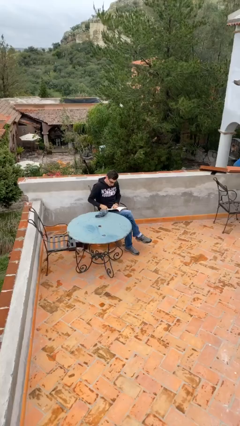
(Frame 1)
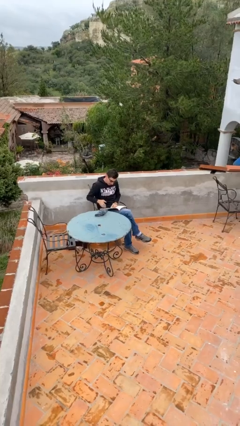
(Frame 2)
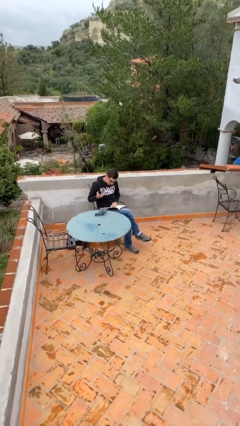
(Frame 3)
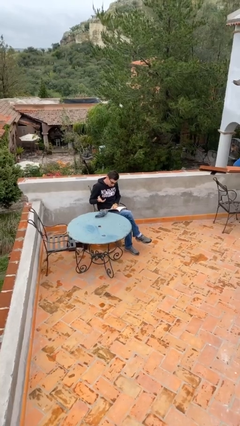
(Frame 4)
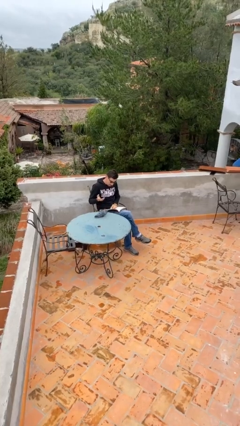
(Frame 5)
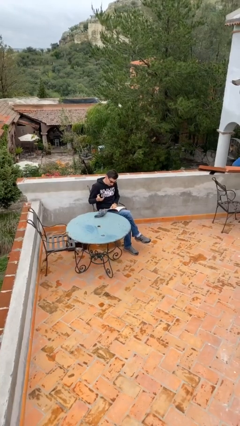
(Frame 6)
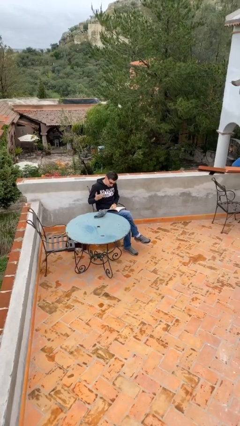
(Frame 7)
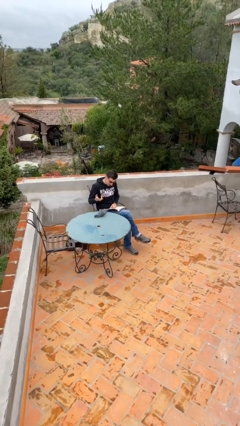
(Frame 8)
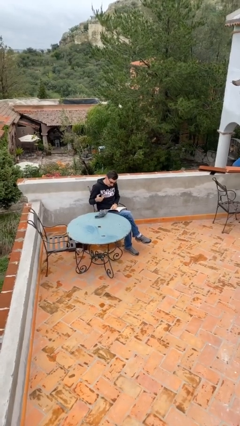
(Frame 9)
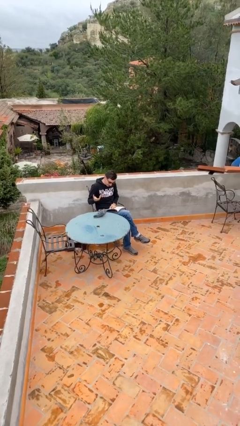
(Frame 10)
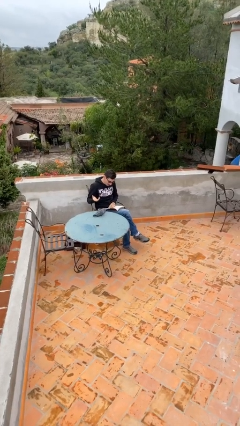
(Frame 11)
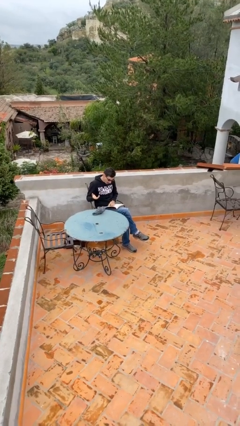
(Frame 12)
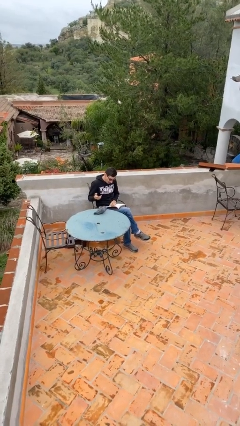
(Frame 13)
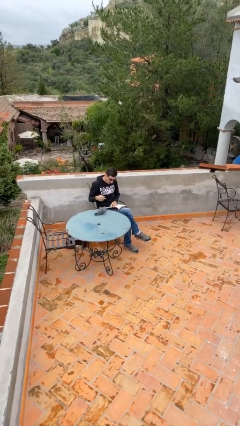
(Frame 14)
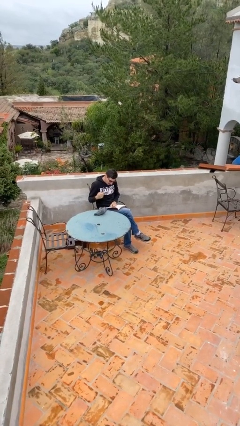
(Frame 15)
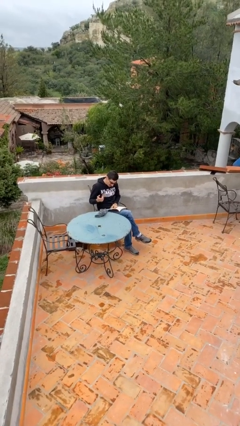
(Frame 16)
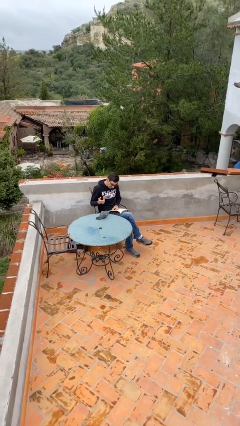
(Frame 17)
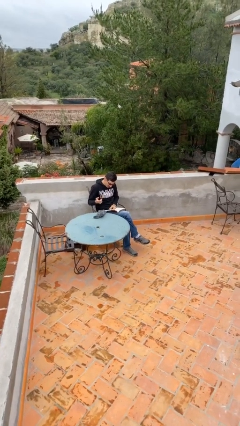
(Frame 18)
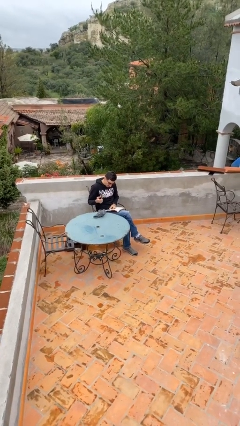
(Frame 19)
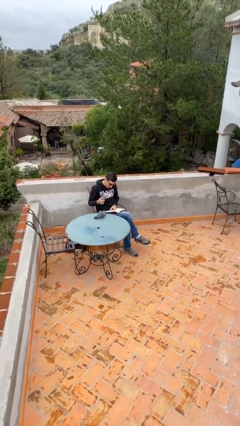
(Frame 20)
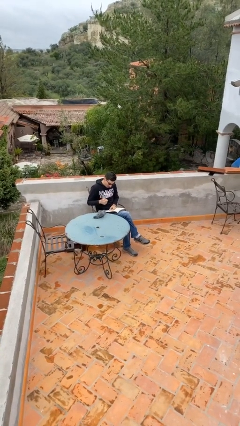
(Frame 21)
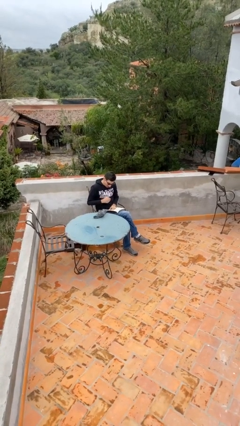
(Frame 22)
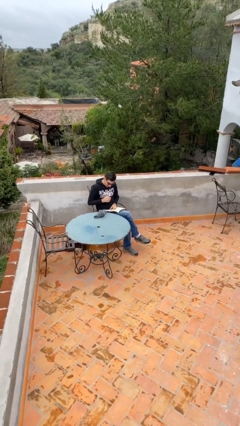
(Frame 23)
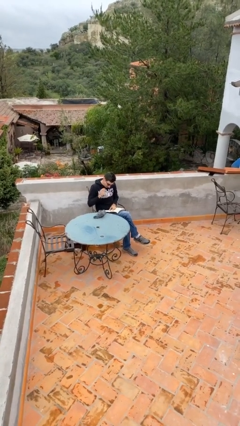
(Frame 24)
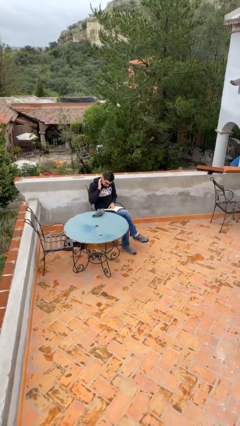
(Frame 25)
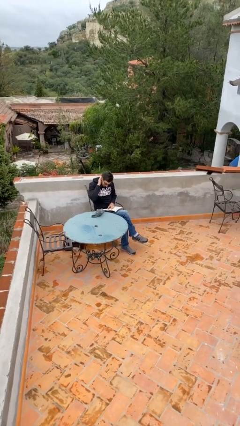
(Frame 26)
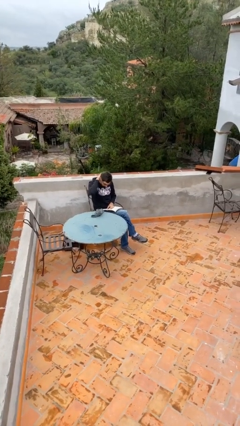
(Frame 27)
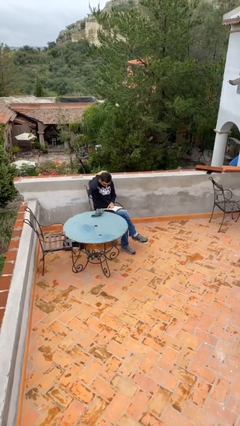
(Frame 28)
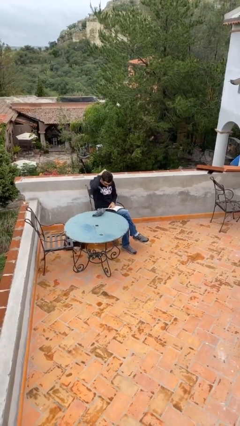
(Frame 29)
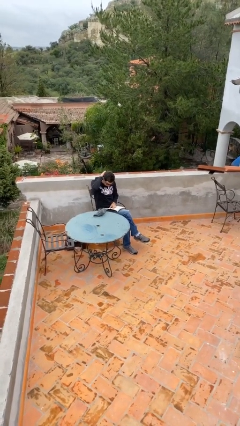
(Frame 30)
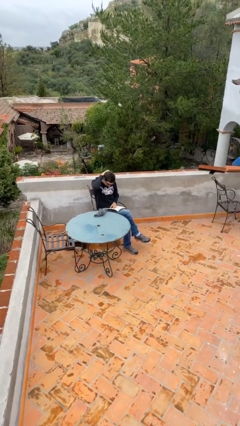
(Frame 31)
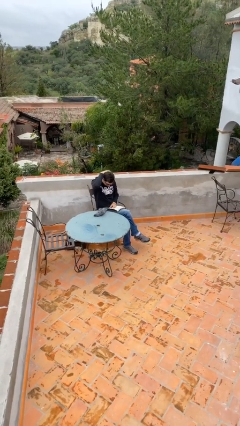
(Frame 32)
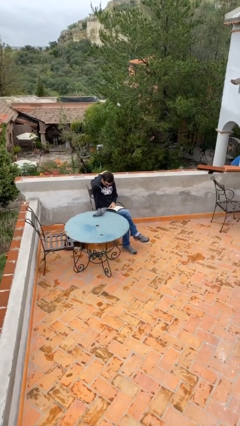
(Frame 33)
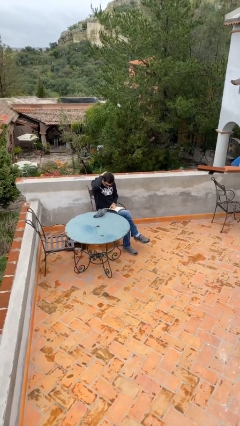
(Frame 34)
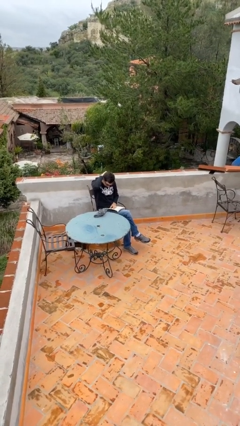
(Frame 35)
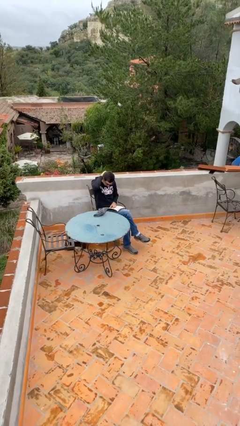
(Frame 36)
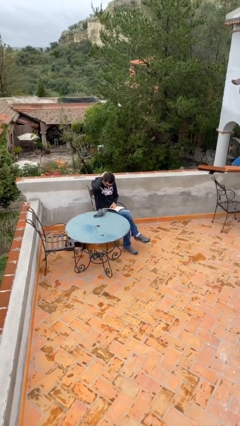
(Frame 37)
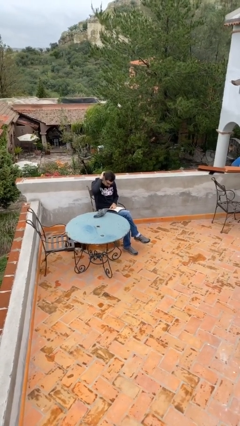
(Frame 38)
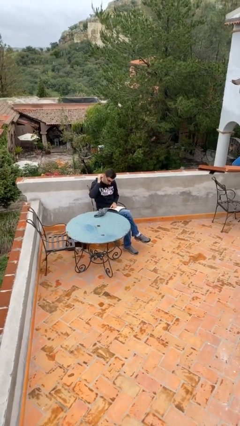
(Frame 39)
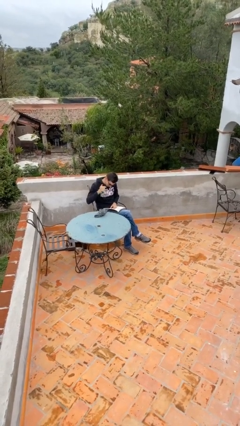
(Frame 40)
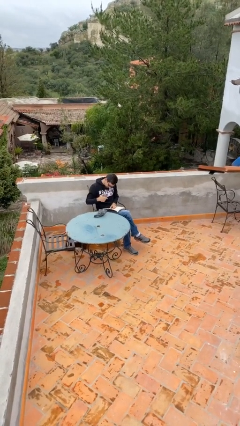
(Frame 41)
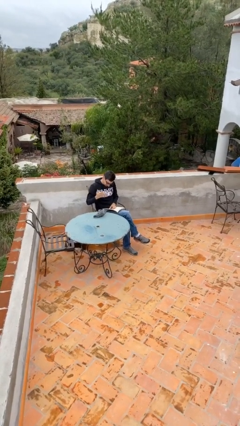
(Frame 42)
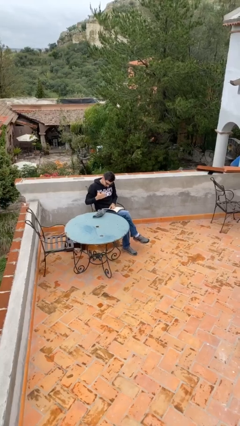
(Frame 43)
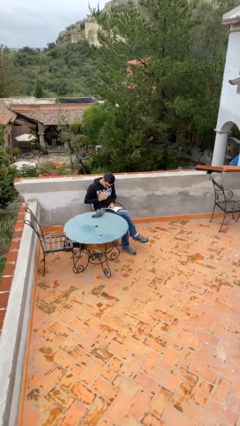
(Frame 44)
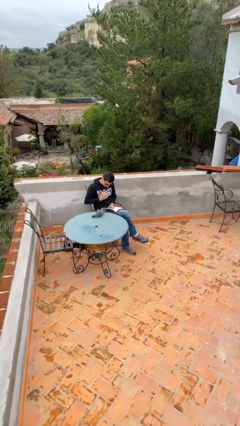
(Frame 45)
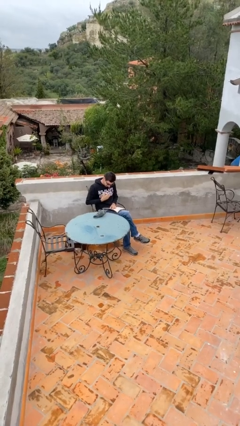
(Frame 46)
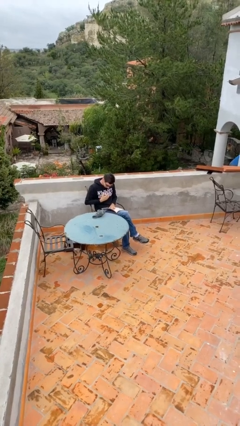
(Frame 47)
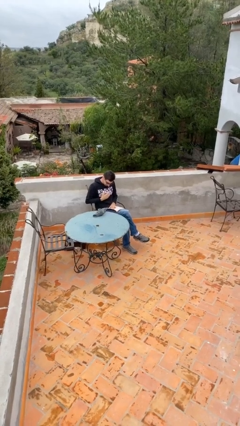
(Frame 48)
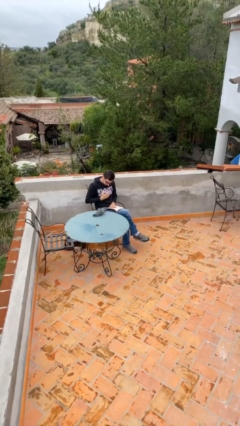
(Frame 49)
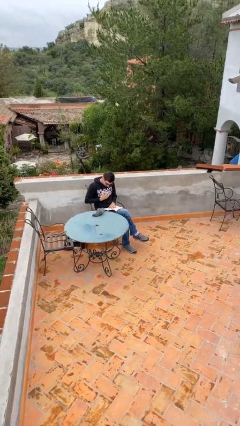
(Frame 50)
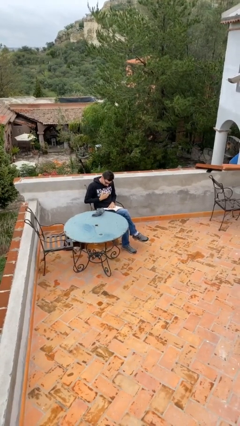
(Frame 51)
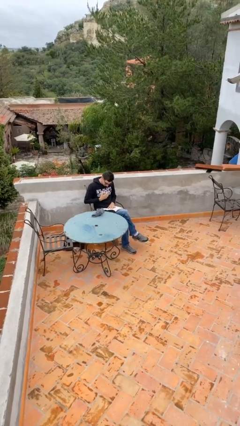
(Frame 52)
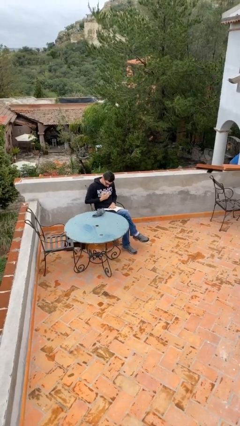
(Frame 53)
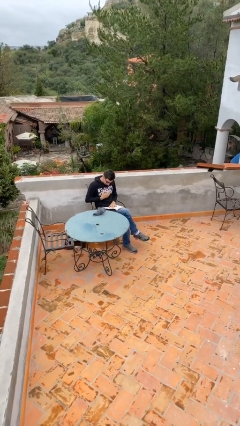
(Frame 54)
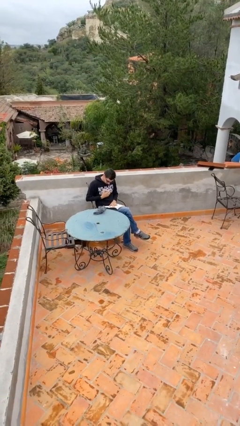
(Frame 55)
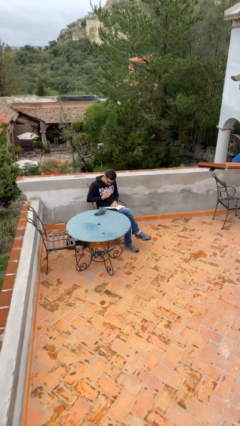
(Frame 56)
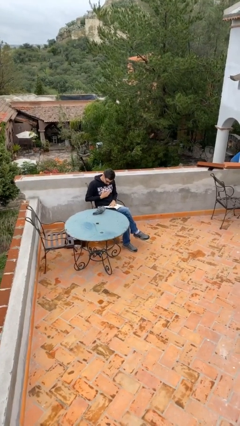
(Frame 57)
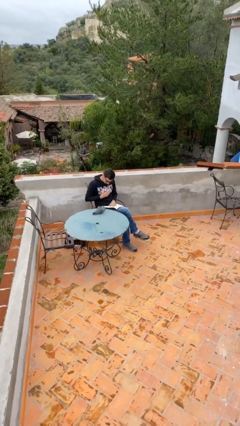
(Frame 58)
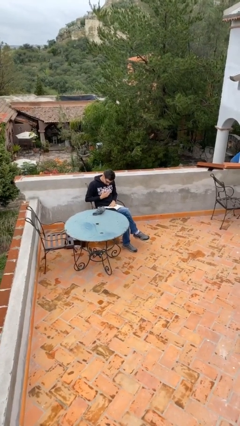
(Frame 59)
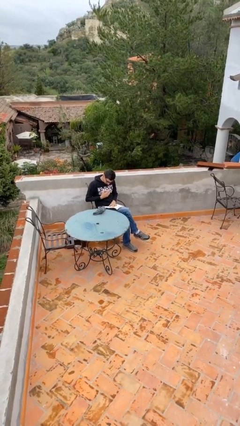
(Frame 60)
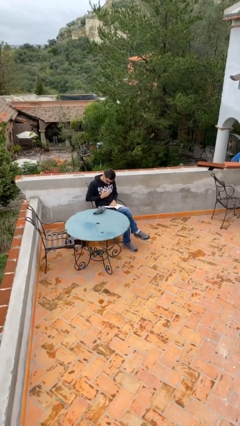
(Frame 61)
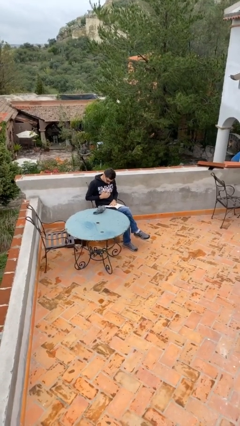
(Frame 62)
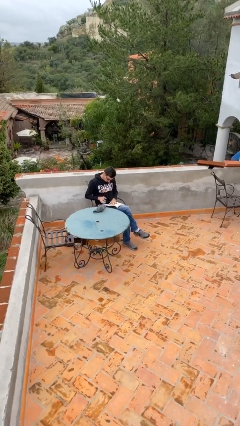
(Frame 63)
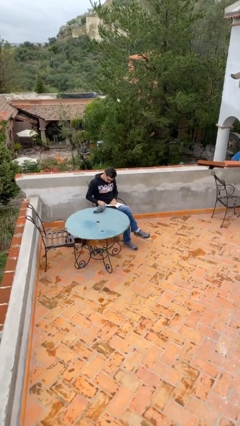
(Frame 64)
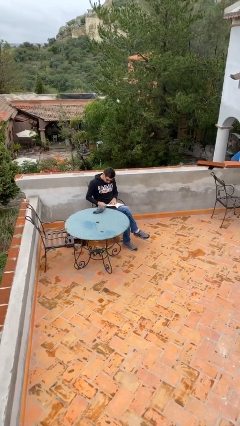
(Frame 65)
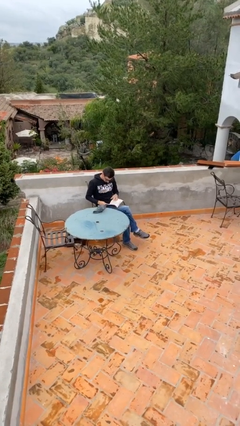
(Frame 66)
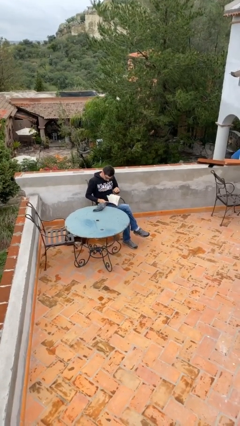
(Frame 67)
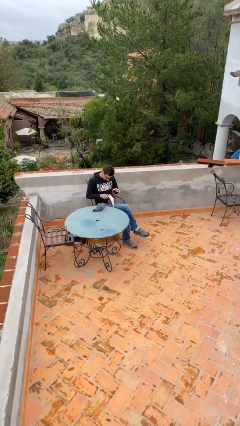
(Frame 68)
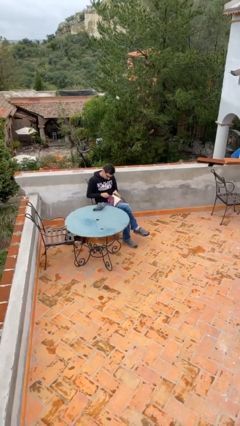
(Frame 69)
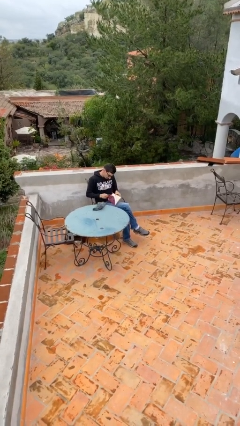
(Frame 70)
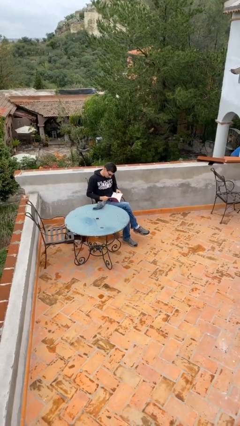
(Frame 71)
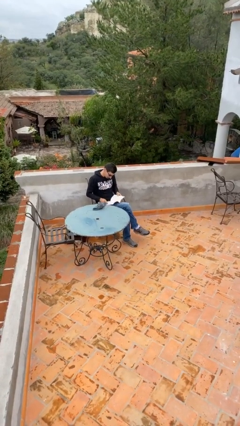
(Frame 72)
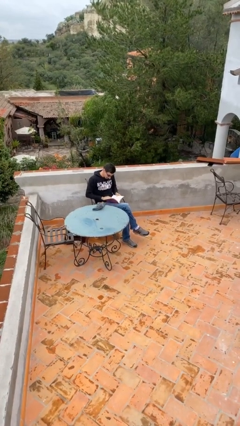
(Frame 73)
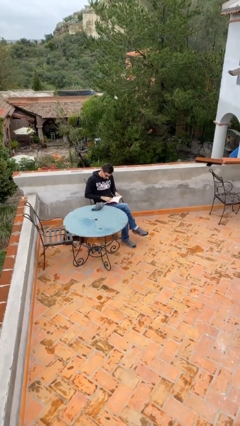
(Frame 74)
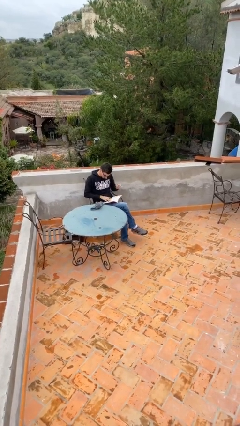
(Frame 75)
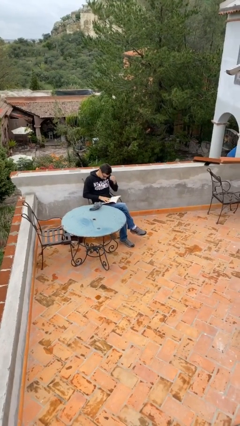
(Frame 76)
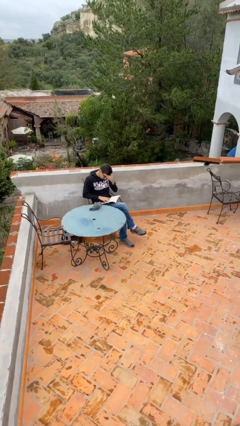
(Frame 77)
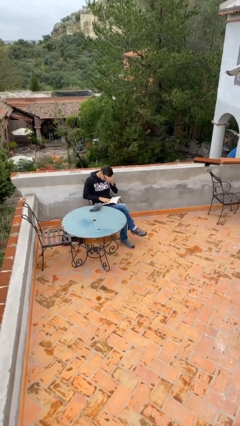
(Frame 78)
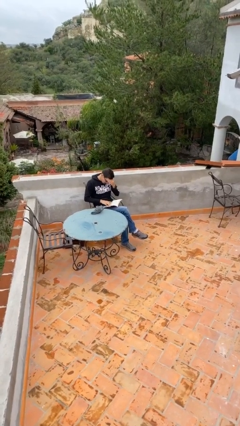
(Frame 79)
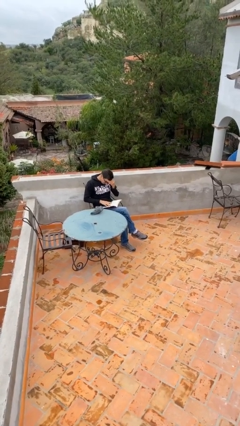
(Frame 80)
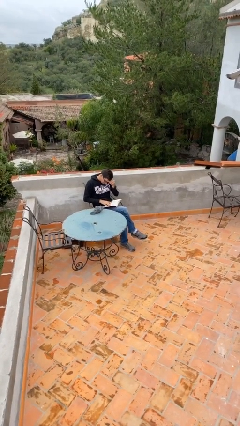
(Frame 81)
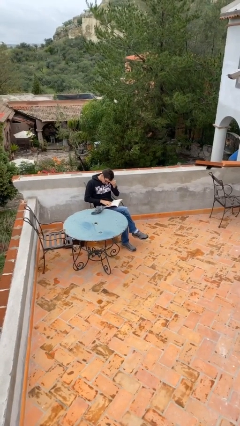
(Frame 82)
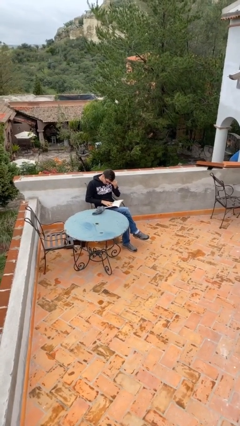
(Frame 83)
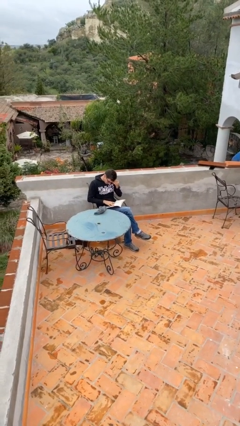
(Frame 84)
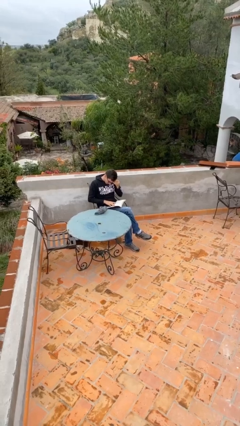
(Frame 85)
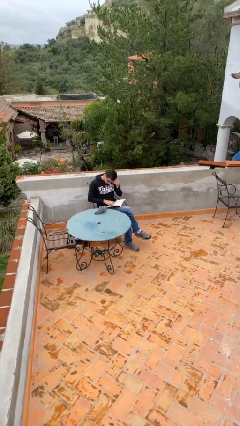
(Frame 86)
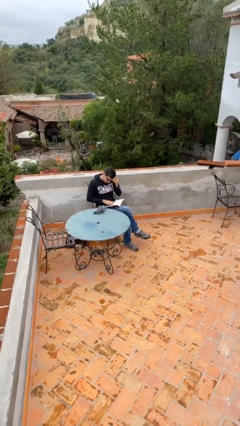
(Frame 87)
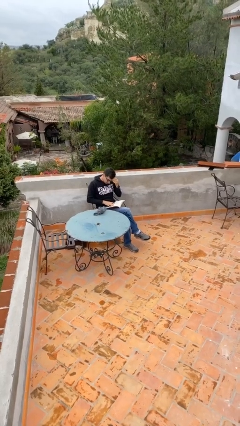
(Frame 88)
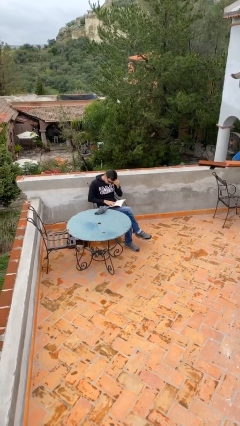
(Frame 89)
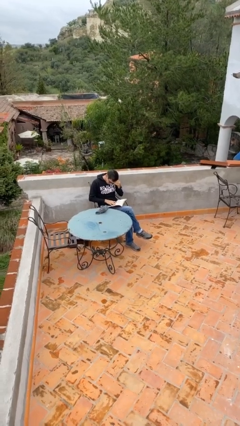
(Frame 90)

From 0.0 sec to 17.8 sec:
person reads document

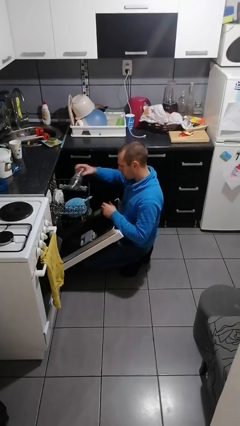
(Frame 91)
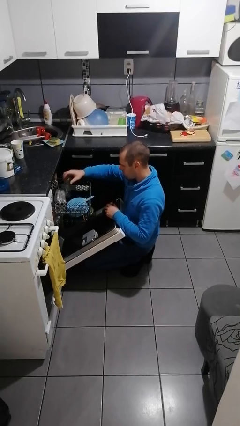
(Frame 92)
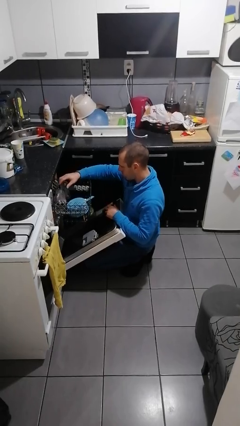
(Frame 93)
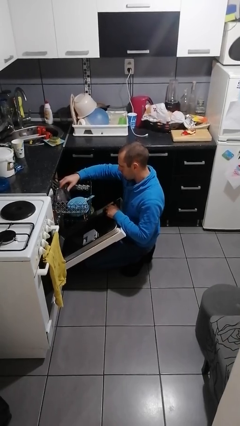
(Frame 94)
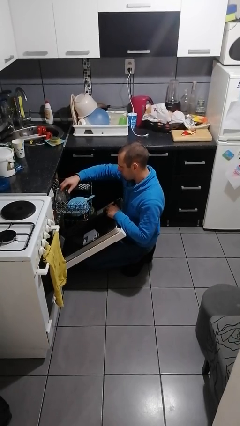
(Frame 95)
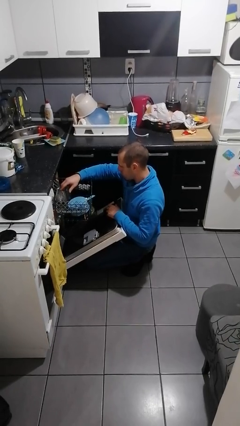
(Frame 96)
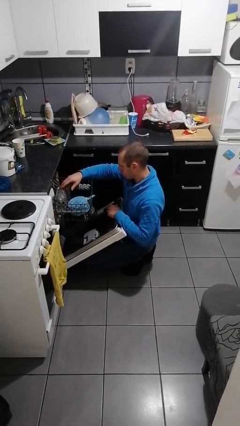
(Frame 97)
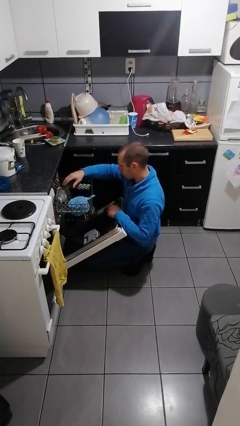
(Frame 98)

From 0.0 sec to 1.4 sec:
person loads dishwasher
